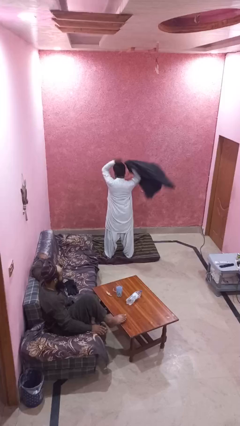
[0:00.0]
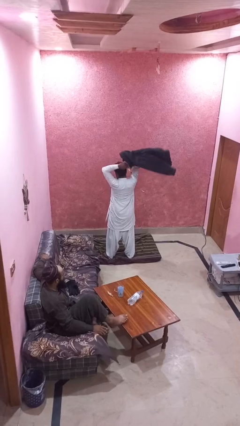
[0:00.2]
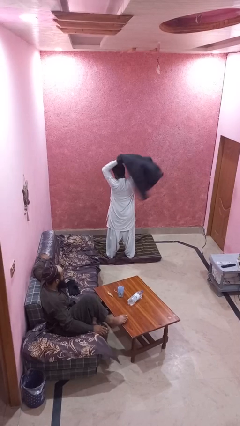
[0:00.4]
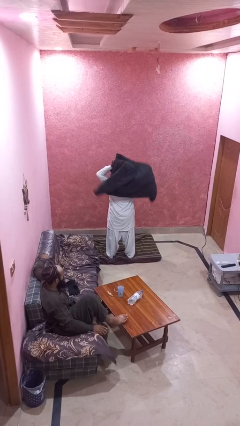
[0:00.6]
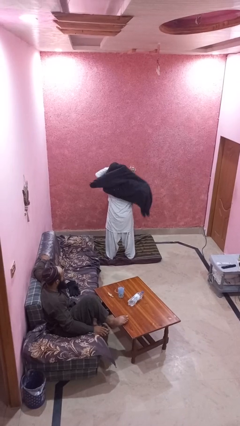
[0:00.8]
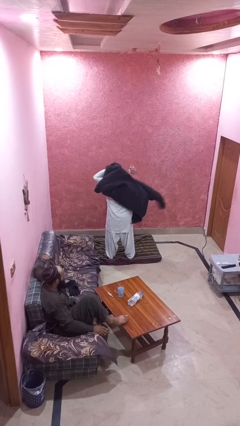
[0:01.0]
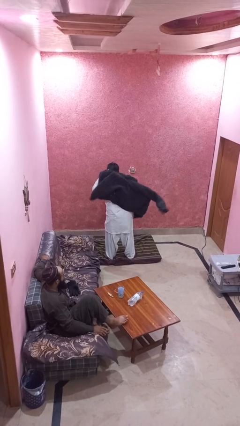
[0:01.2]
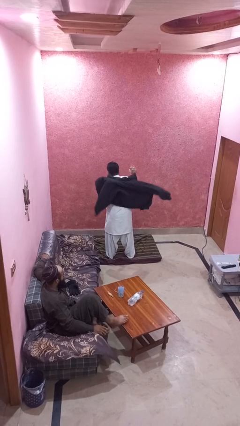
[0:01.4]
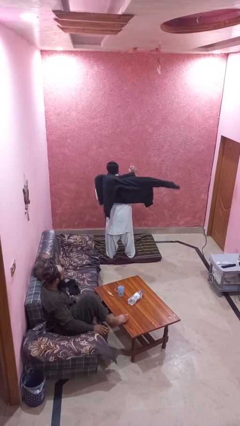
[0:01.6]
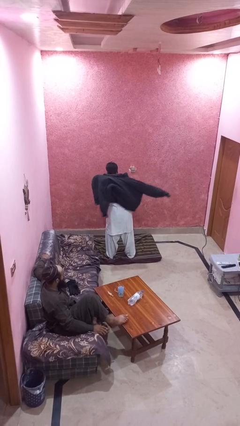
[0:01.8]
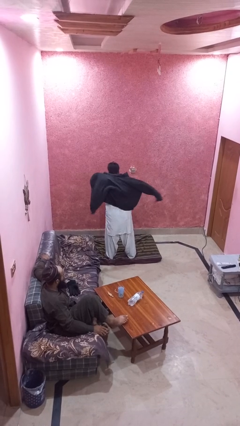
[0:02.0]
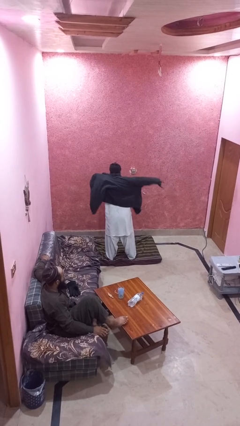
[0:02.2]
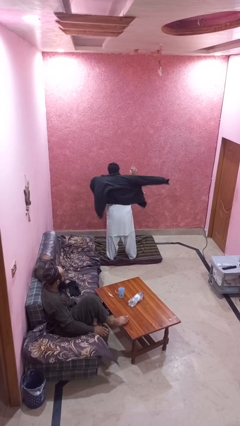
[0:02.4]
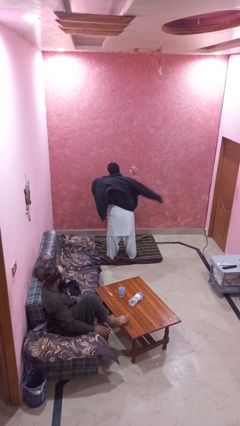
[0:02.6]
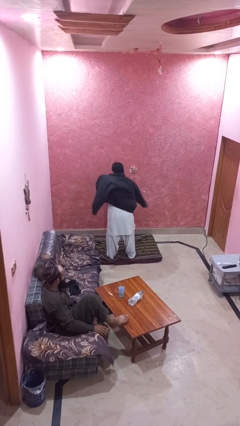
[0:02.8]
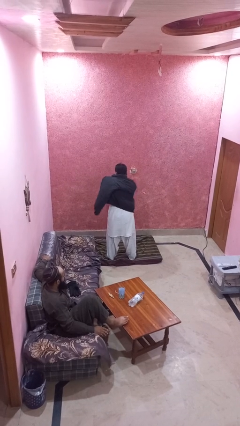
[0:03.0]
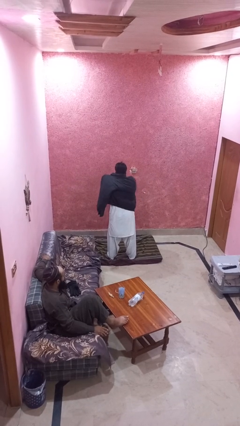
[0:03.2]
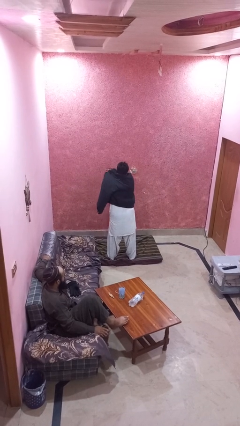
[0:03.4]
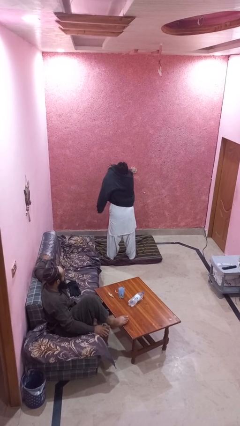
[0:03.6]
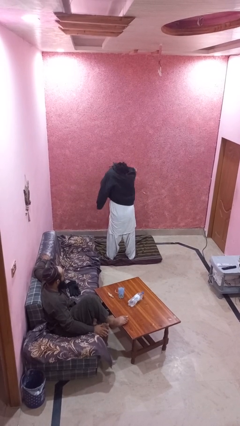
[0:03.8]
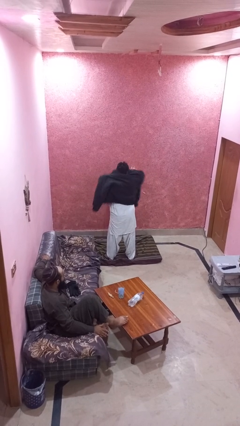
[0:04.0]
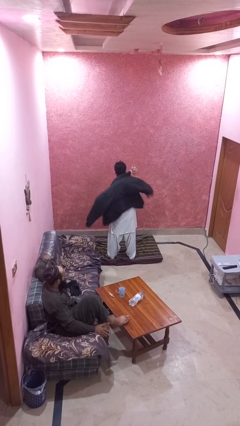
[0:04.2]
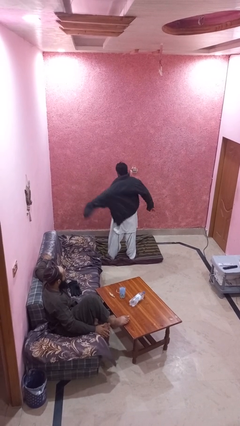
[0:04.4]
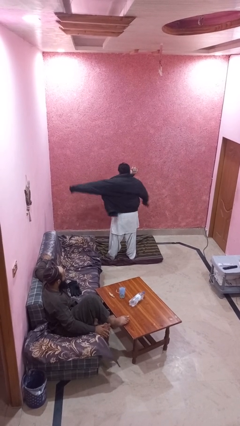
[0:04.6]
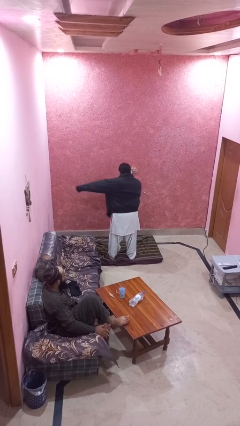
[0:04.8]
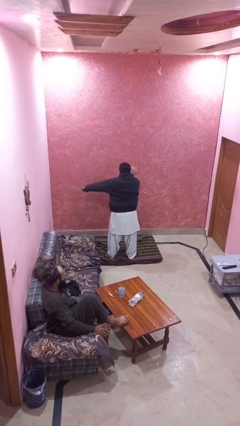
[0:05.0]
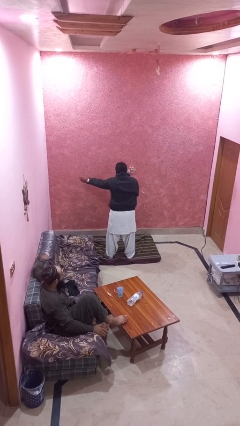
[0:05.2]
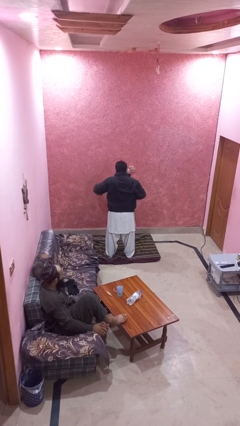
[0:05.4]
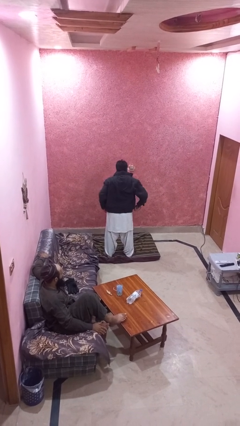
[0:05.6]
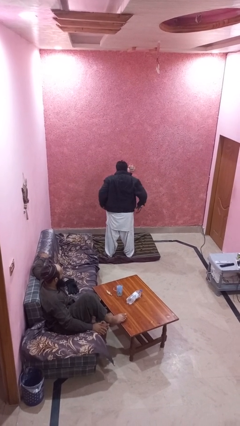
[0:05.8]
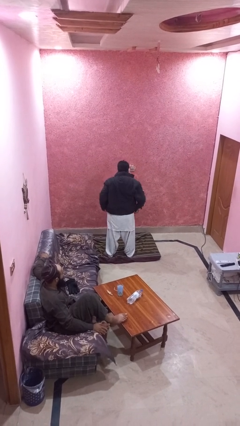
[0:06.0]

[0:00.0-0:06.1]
person puts on jacket

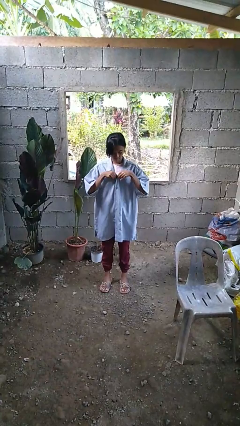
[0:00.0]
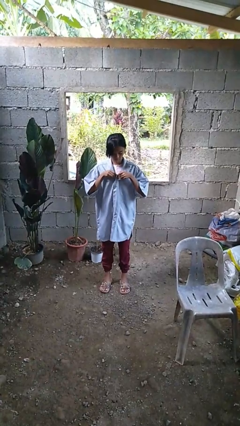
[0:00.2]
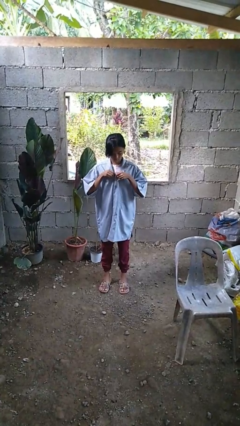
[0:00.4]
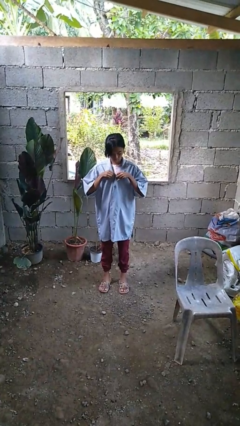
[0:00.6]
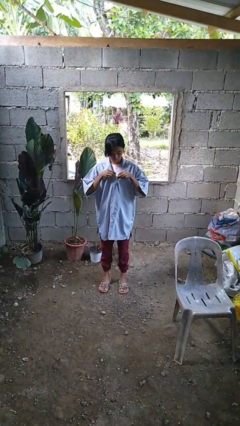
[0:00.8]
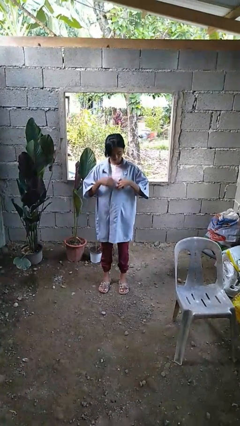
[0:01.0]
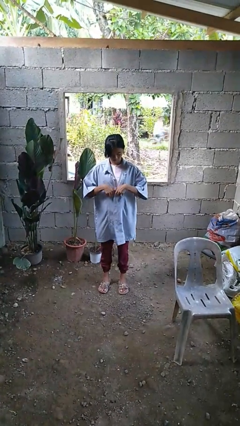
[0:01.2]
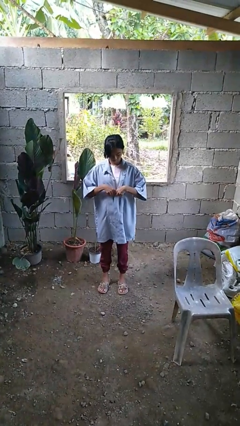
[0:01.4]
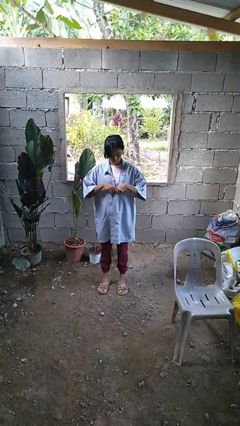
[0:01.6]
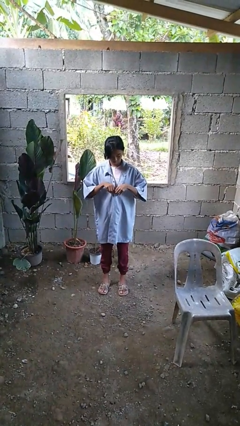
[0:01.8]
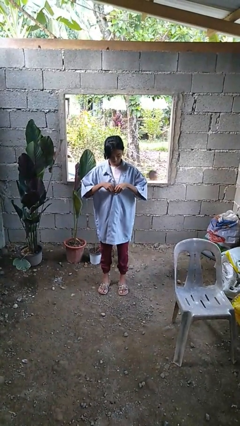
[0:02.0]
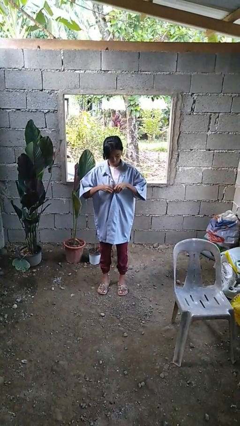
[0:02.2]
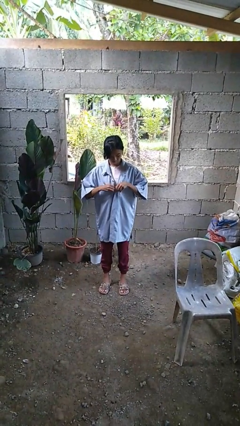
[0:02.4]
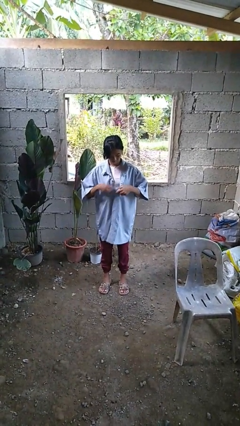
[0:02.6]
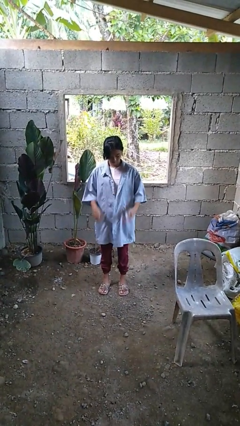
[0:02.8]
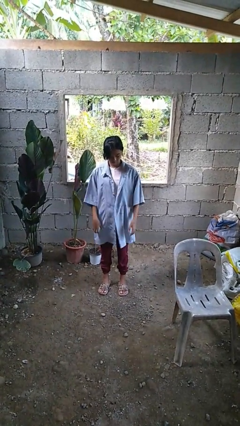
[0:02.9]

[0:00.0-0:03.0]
person unbuttons shirt

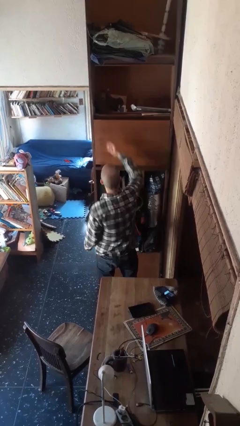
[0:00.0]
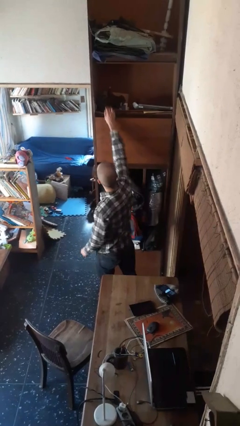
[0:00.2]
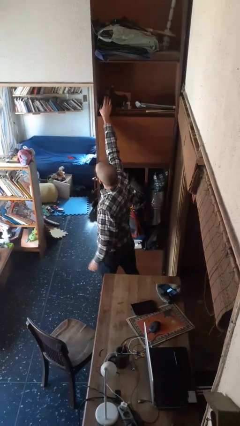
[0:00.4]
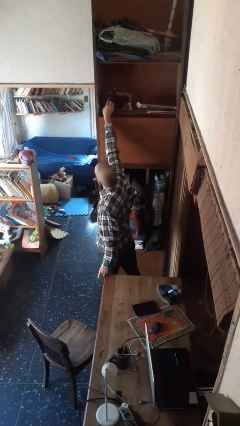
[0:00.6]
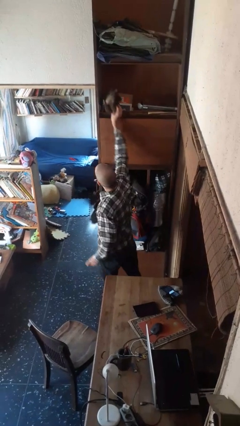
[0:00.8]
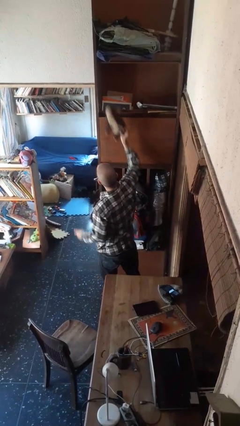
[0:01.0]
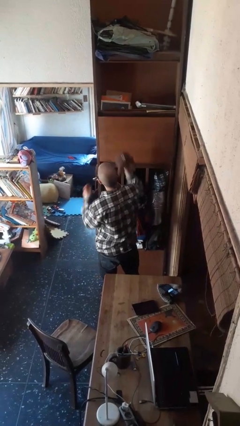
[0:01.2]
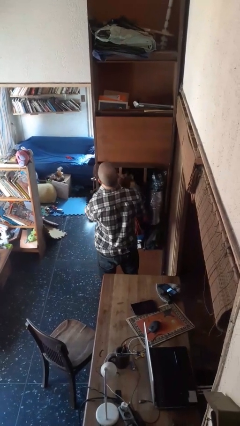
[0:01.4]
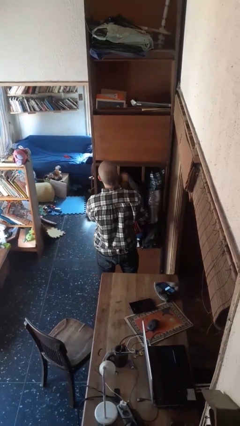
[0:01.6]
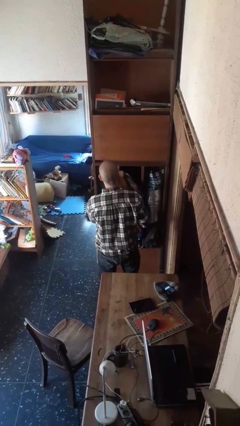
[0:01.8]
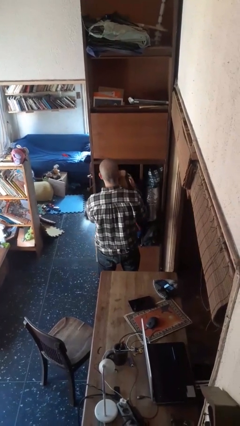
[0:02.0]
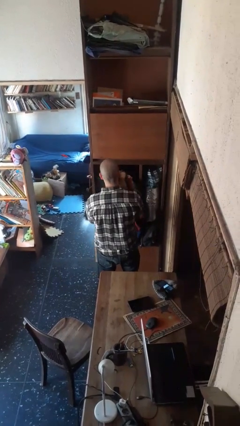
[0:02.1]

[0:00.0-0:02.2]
person picks up object from shelf

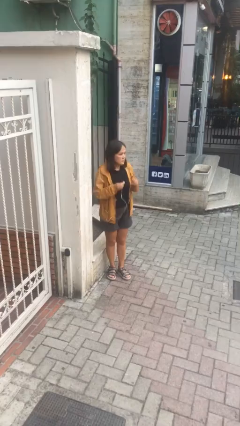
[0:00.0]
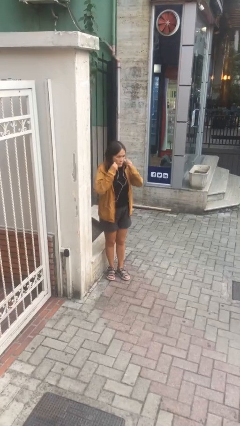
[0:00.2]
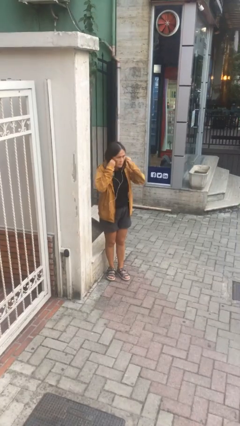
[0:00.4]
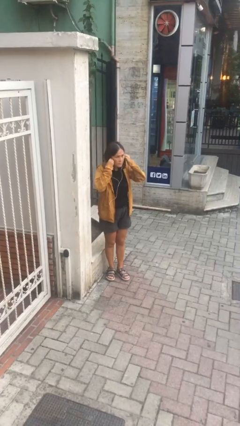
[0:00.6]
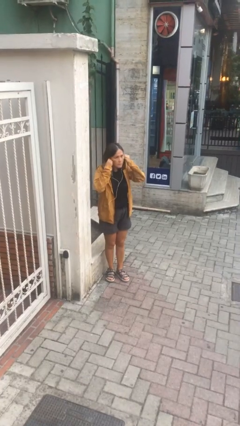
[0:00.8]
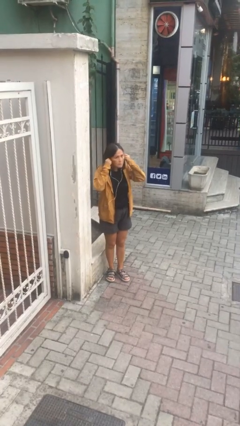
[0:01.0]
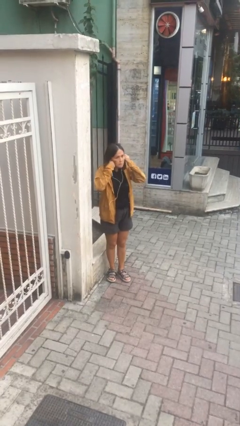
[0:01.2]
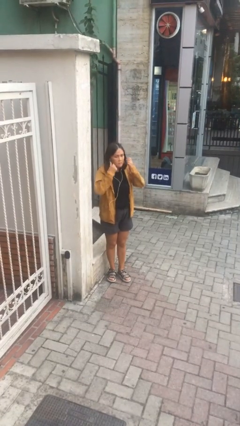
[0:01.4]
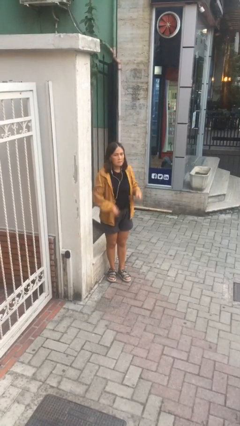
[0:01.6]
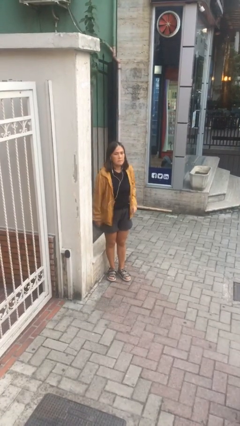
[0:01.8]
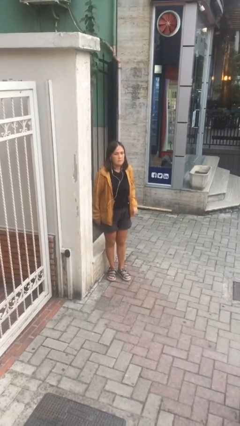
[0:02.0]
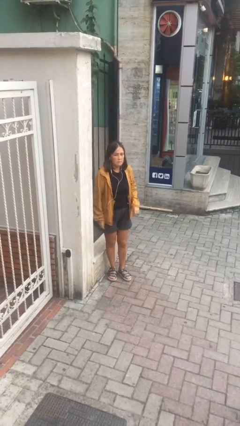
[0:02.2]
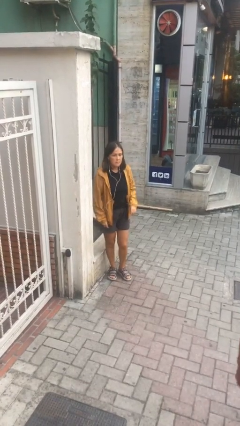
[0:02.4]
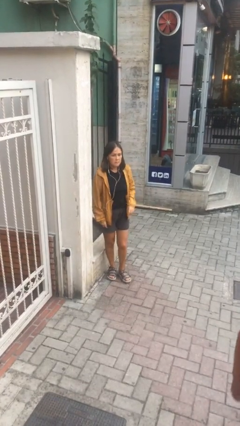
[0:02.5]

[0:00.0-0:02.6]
person puts on headphones

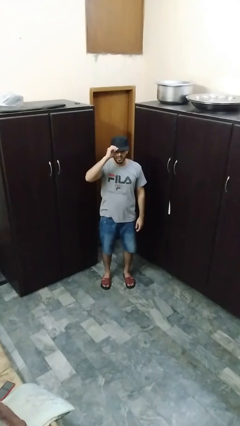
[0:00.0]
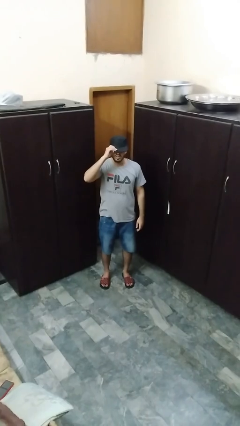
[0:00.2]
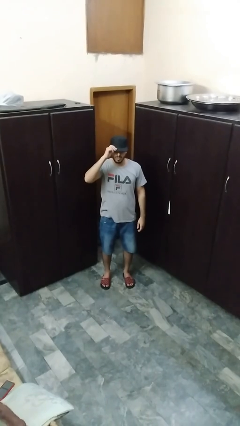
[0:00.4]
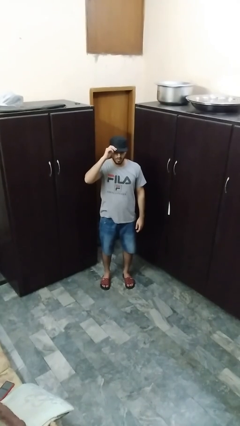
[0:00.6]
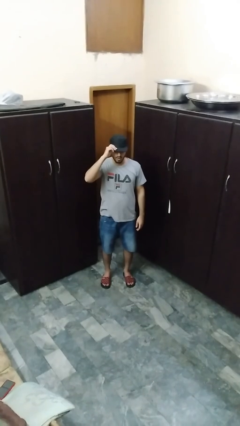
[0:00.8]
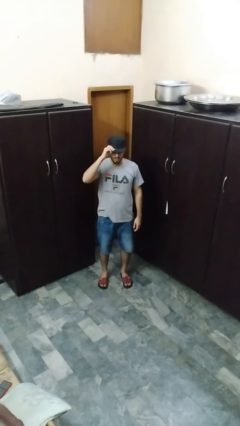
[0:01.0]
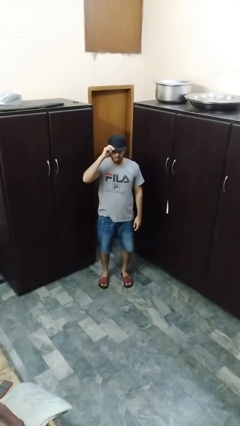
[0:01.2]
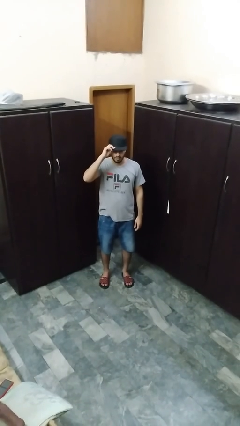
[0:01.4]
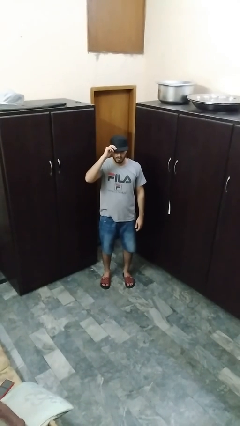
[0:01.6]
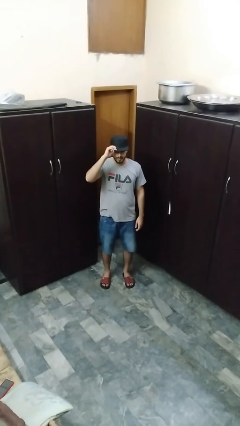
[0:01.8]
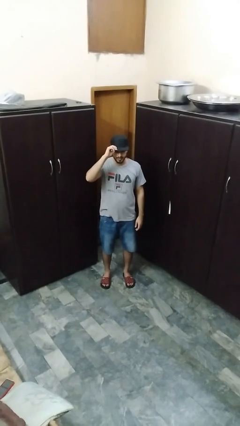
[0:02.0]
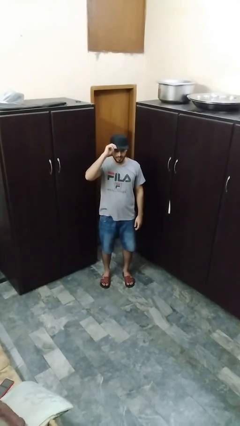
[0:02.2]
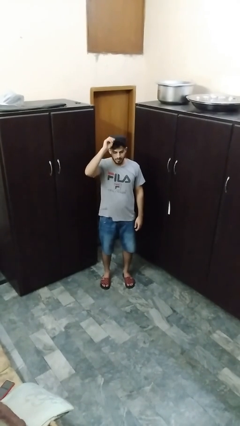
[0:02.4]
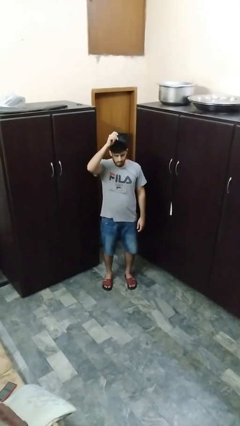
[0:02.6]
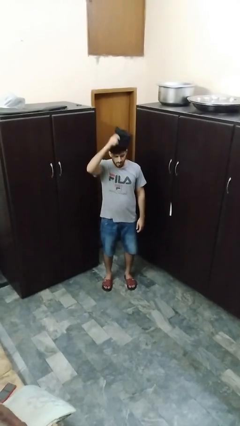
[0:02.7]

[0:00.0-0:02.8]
person puts on hat

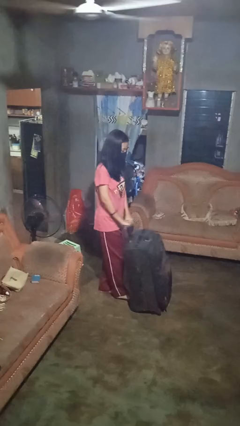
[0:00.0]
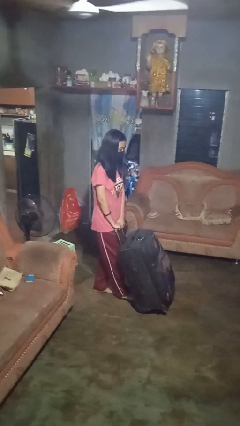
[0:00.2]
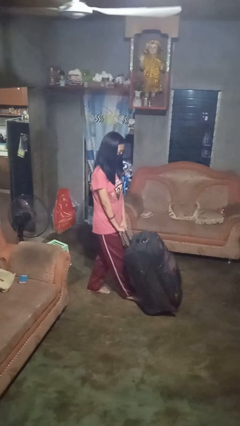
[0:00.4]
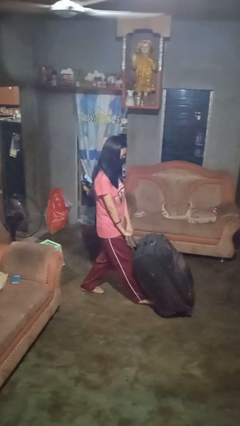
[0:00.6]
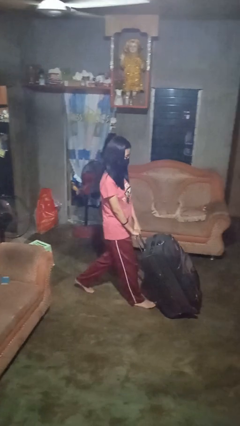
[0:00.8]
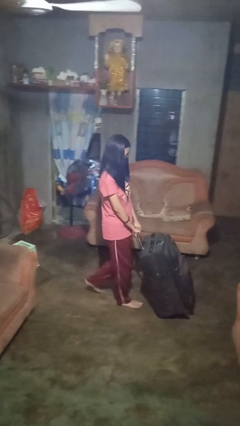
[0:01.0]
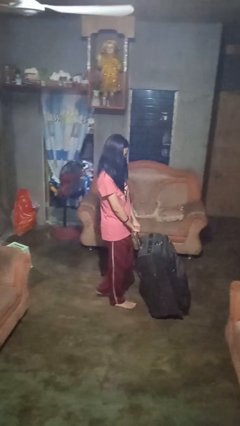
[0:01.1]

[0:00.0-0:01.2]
person pushes wheeled cart
